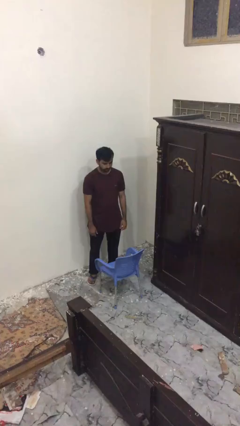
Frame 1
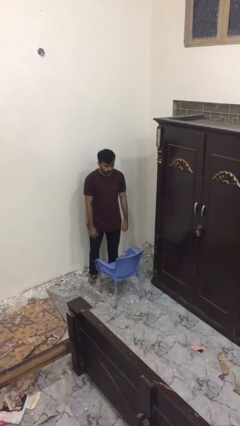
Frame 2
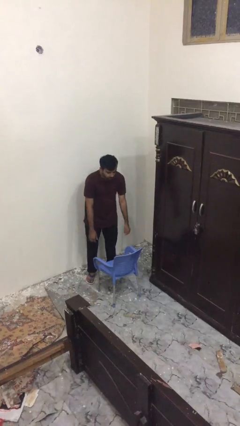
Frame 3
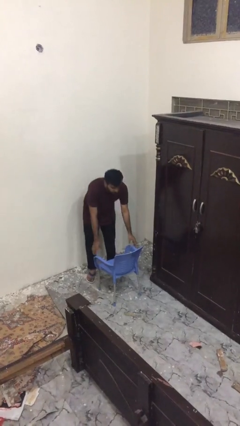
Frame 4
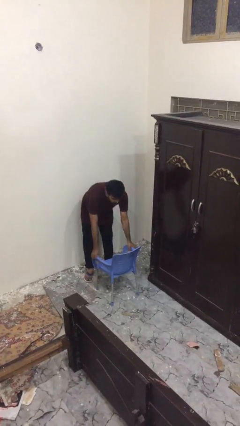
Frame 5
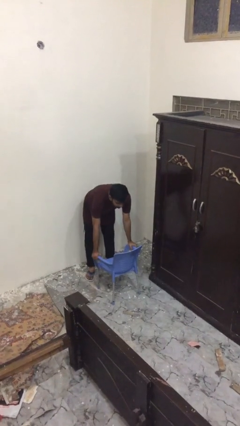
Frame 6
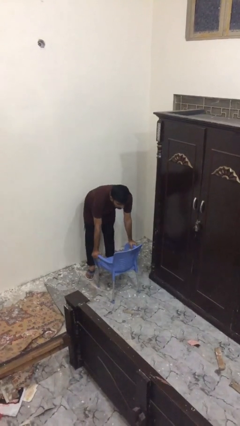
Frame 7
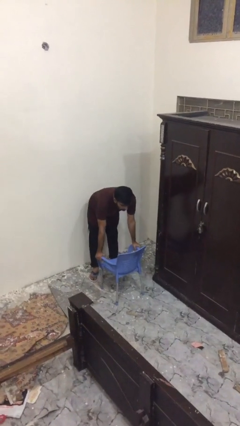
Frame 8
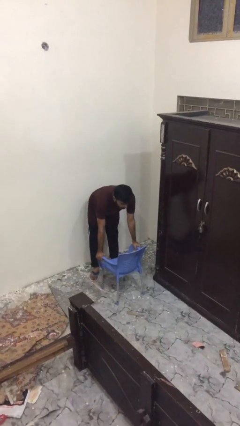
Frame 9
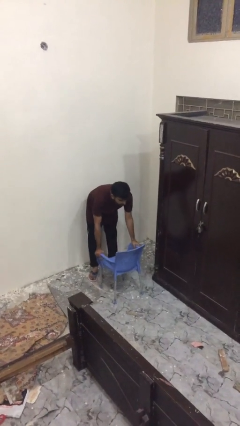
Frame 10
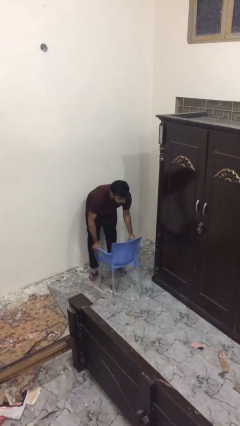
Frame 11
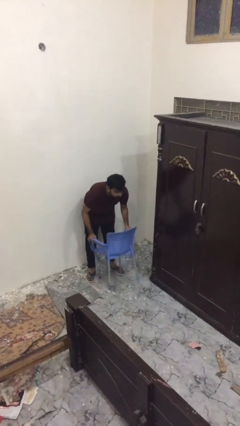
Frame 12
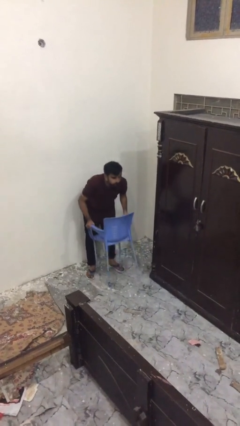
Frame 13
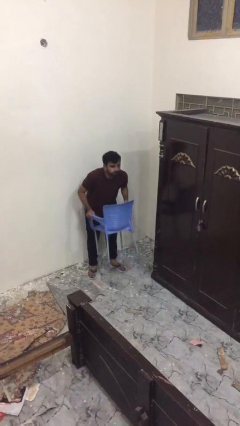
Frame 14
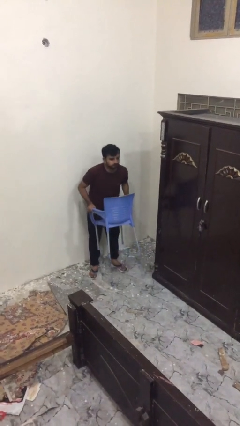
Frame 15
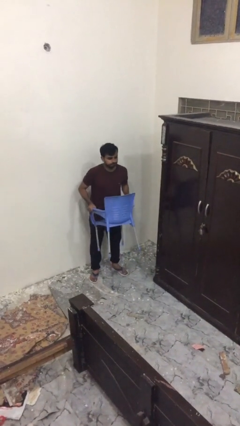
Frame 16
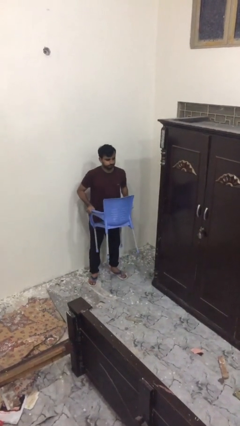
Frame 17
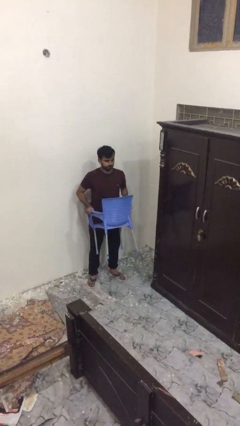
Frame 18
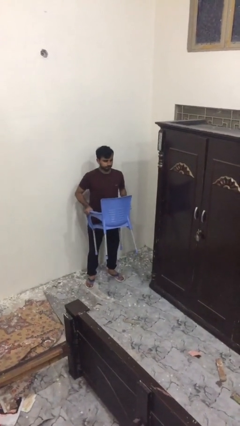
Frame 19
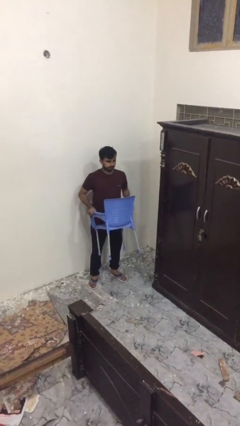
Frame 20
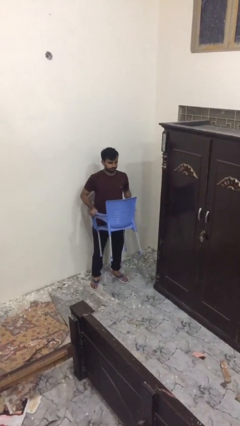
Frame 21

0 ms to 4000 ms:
person picks up object from floor

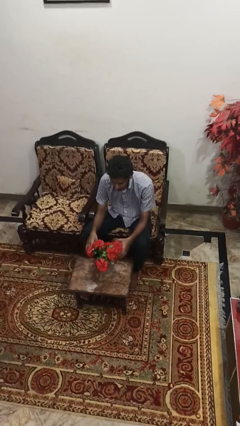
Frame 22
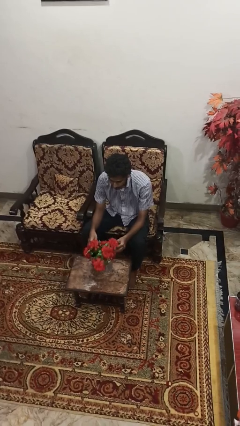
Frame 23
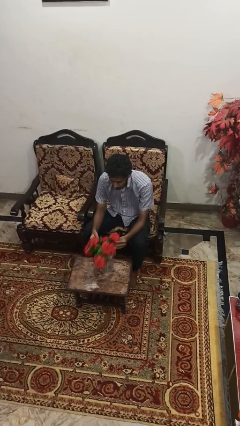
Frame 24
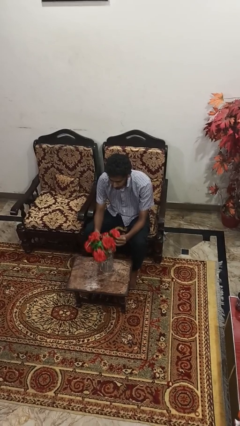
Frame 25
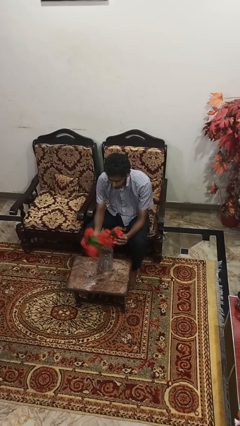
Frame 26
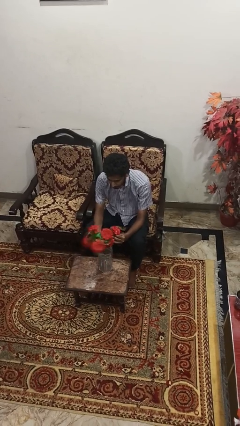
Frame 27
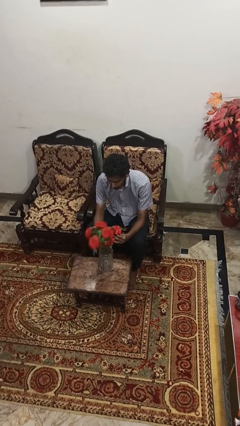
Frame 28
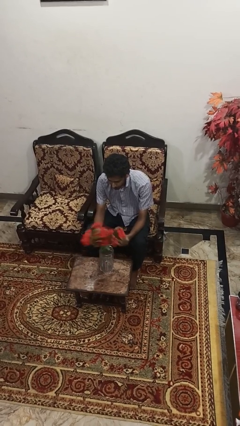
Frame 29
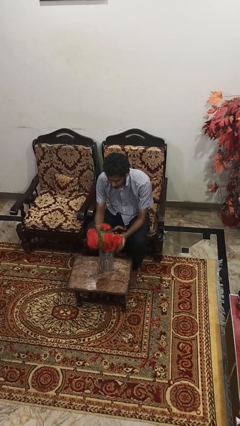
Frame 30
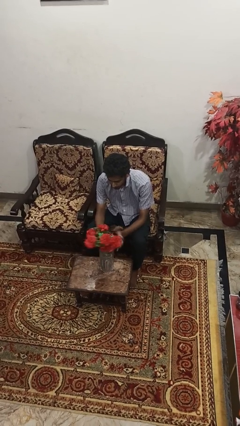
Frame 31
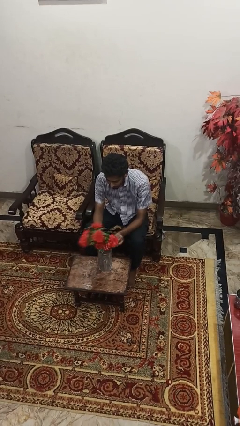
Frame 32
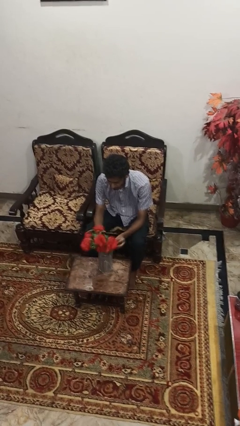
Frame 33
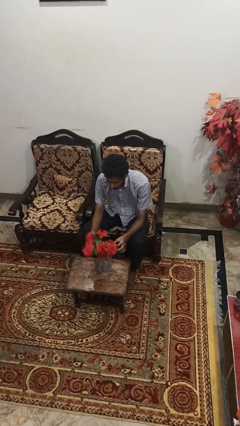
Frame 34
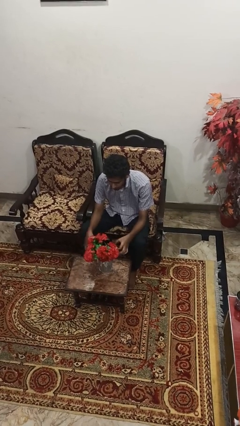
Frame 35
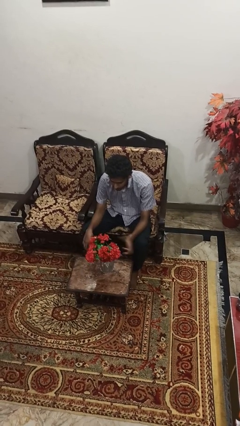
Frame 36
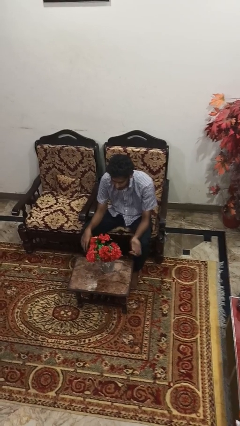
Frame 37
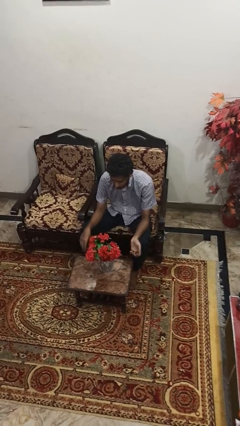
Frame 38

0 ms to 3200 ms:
person arranges flowers in vase

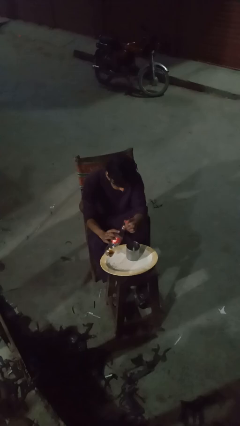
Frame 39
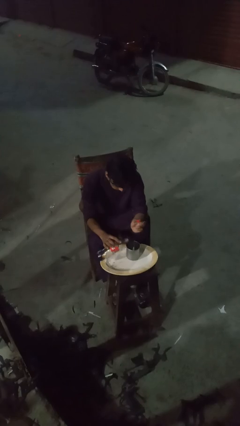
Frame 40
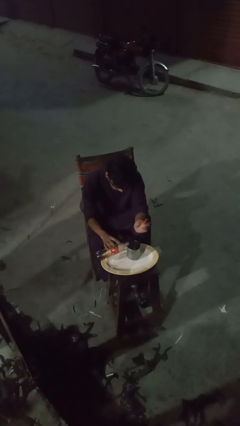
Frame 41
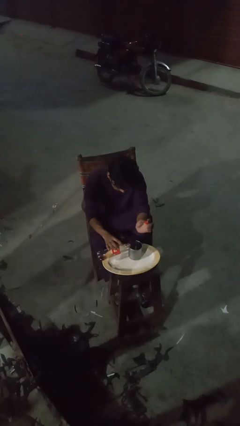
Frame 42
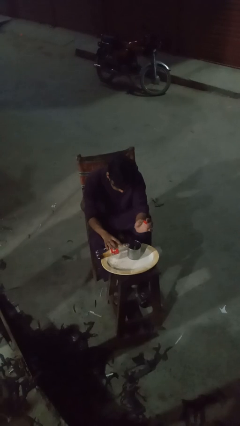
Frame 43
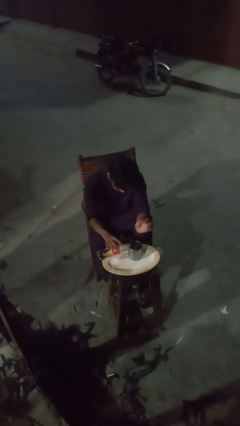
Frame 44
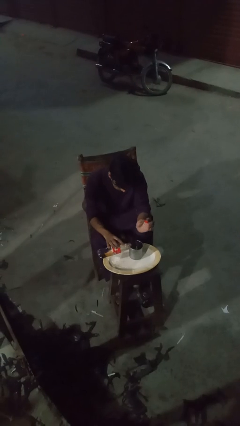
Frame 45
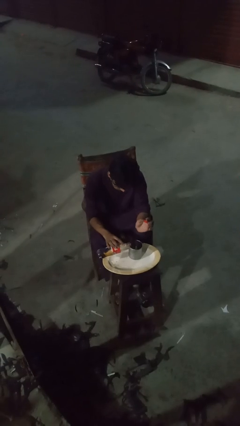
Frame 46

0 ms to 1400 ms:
person pours liquid into cup

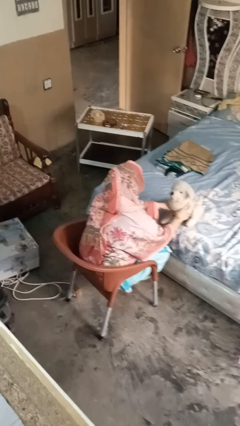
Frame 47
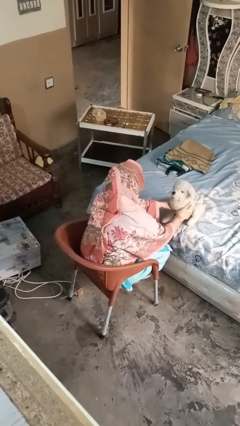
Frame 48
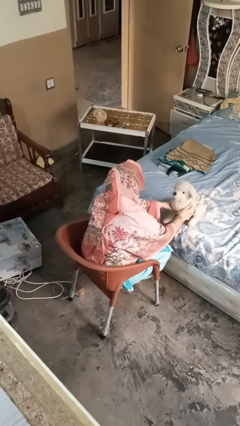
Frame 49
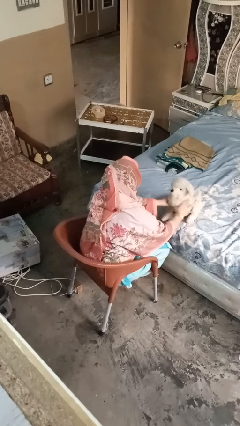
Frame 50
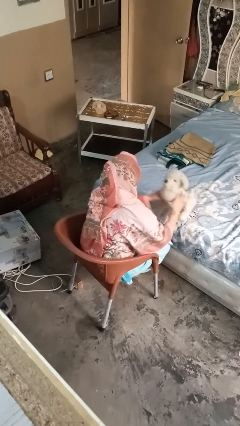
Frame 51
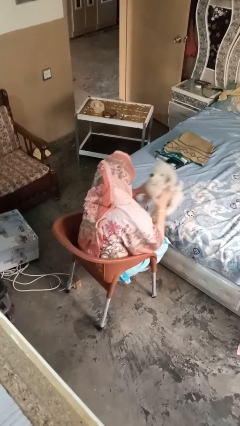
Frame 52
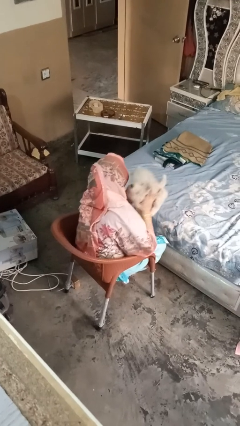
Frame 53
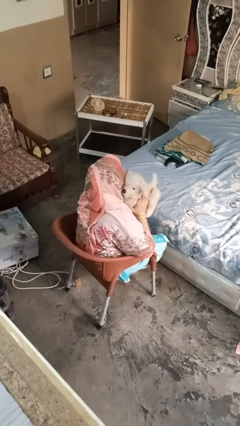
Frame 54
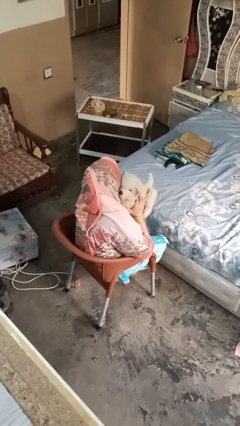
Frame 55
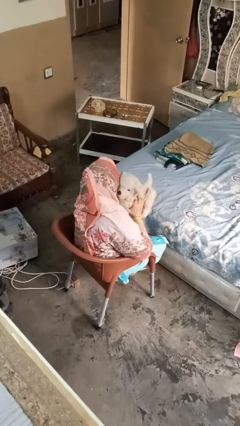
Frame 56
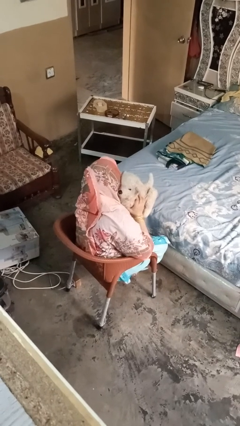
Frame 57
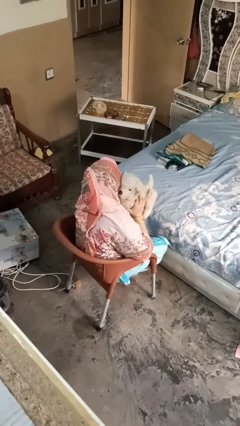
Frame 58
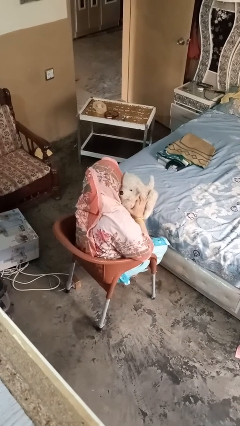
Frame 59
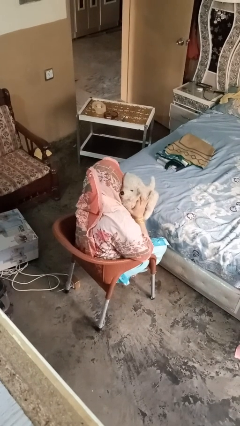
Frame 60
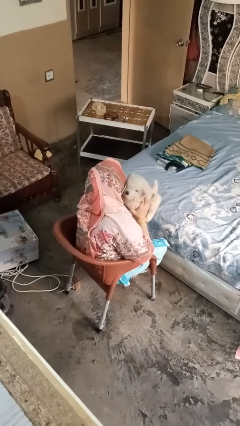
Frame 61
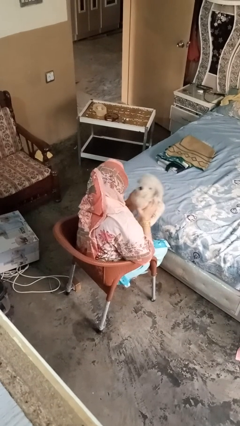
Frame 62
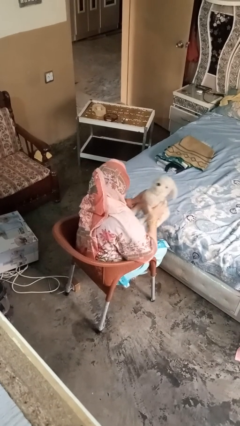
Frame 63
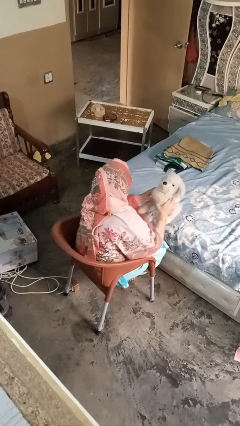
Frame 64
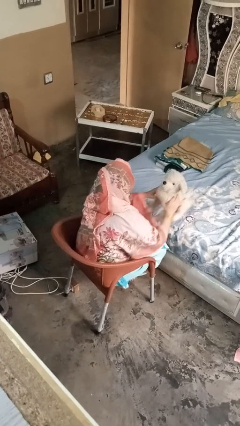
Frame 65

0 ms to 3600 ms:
person hugs stuffed animal

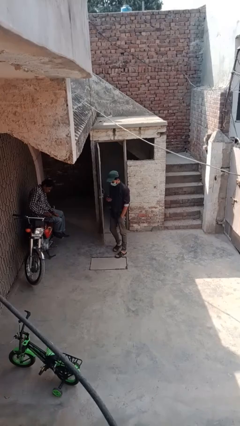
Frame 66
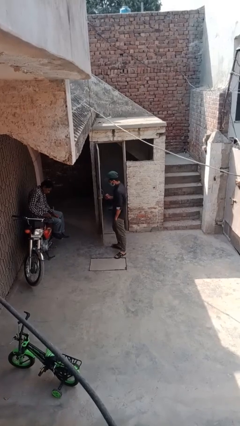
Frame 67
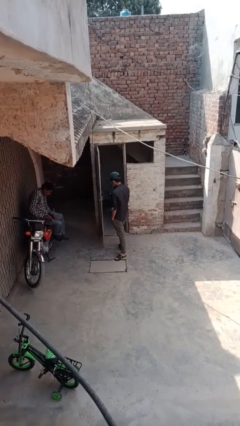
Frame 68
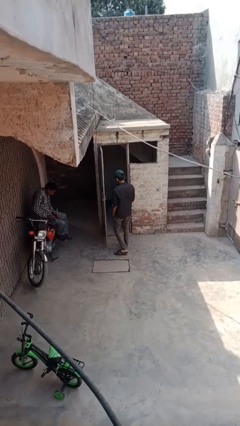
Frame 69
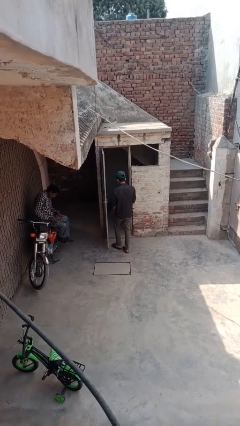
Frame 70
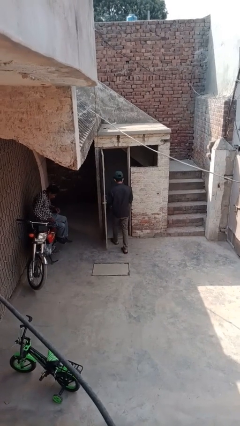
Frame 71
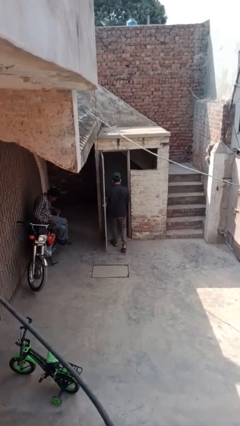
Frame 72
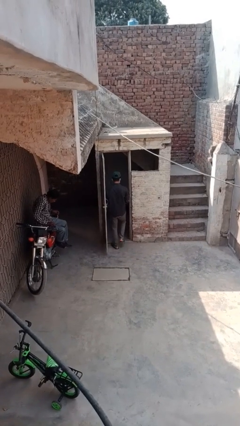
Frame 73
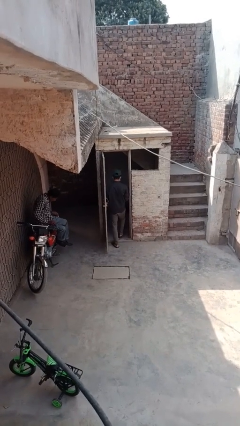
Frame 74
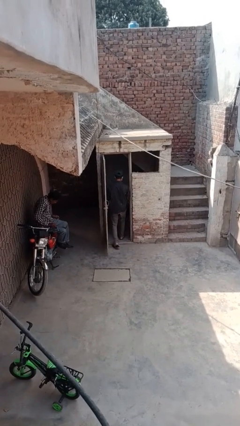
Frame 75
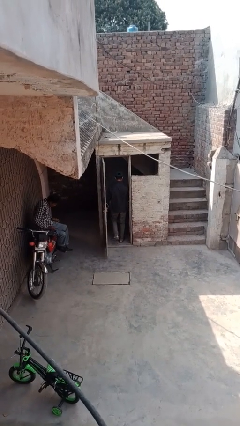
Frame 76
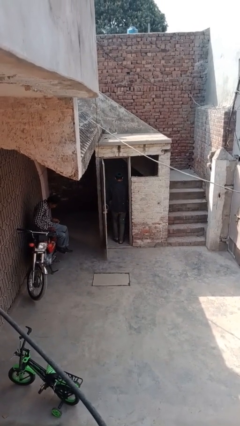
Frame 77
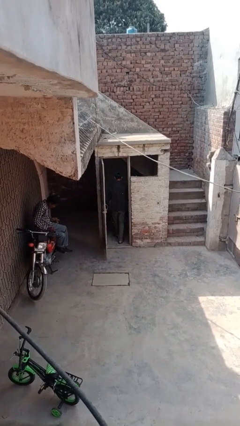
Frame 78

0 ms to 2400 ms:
person exits scene through structure

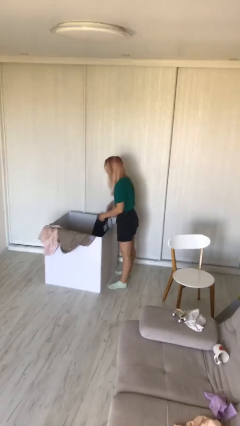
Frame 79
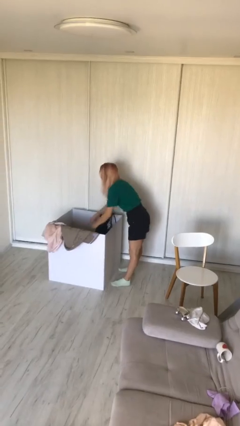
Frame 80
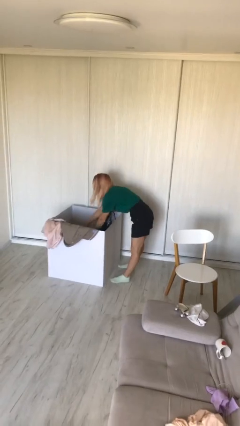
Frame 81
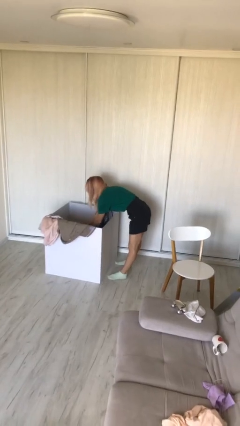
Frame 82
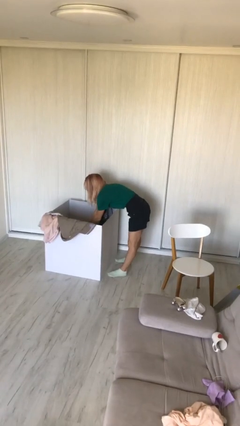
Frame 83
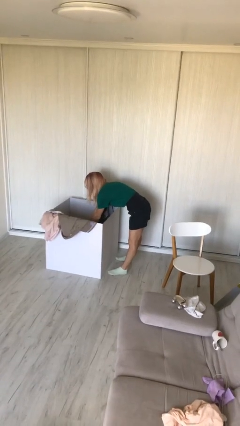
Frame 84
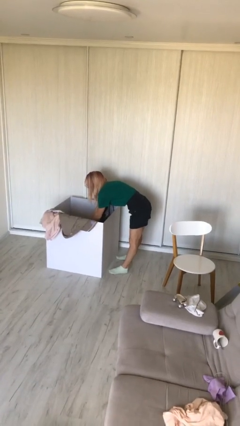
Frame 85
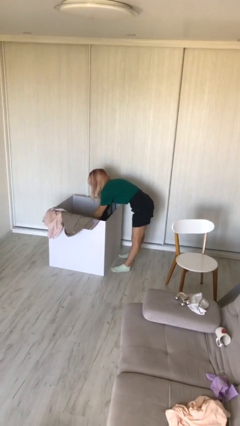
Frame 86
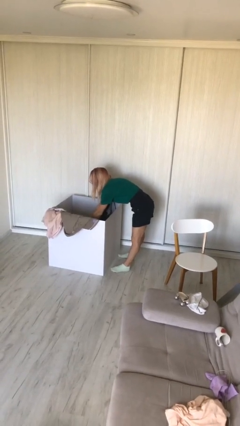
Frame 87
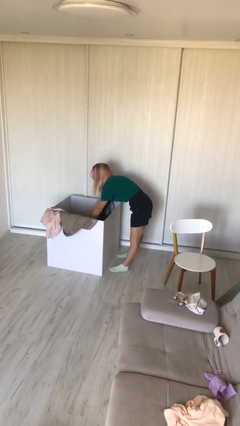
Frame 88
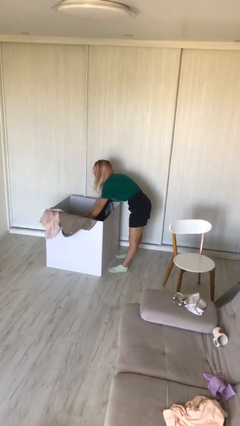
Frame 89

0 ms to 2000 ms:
person searches in box

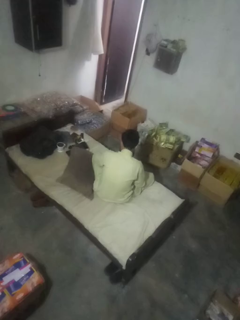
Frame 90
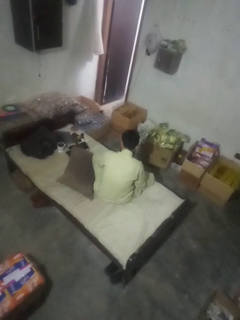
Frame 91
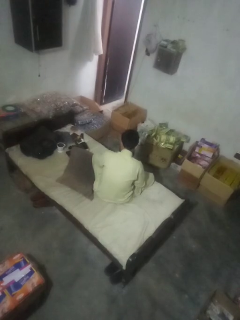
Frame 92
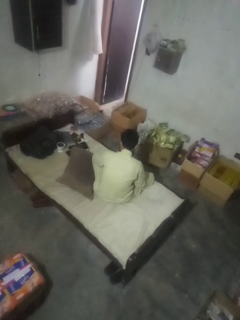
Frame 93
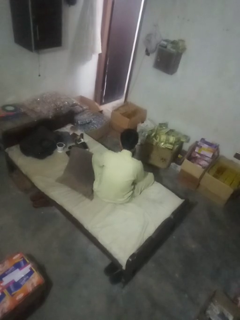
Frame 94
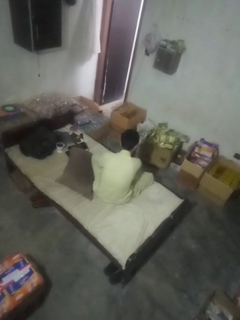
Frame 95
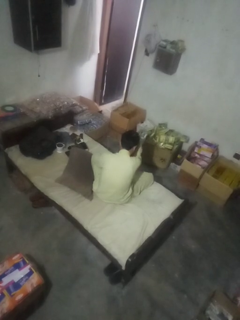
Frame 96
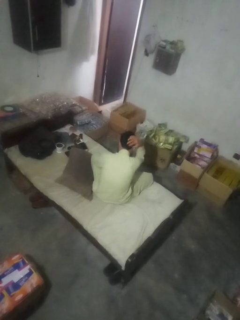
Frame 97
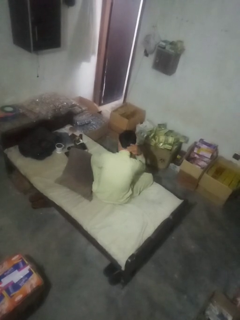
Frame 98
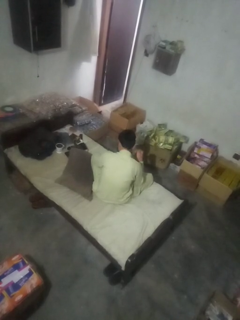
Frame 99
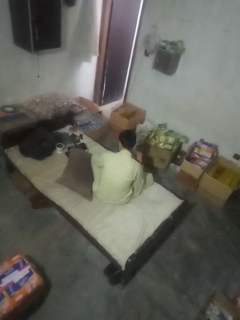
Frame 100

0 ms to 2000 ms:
person strokes hair
